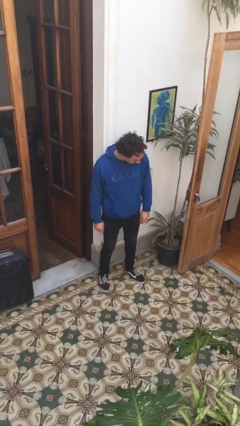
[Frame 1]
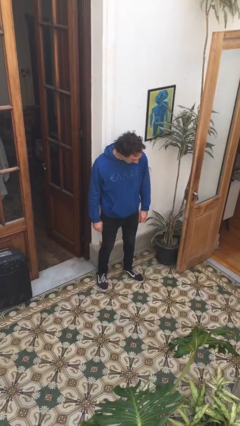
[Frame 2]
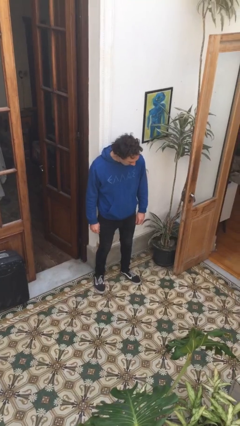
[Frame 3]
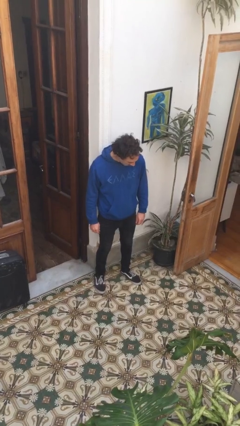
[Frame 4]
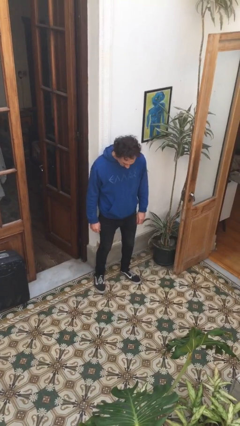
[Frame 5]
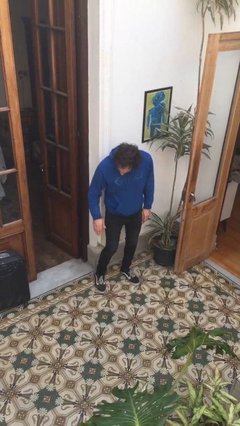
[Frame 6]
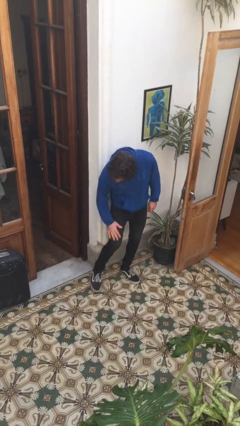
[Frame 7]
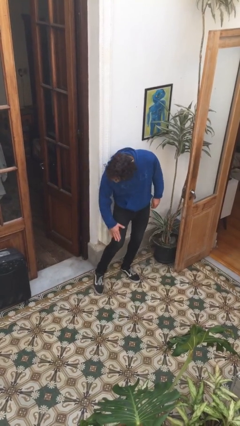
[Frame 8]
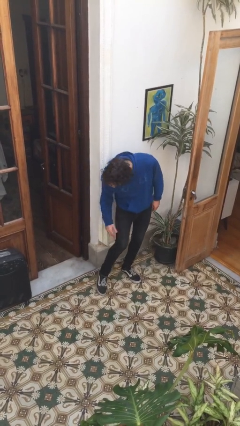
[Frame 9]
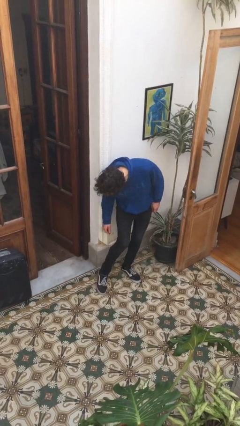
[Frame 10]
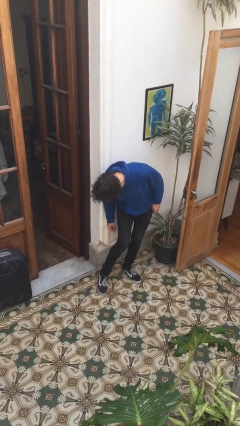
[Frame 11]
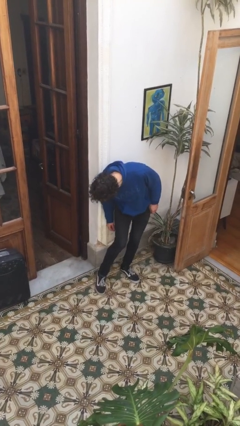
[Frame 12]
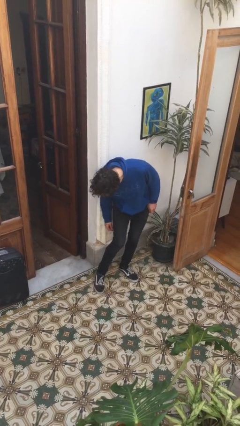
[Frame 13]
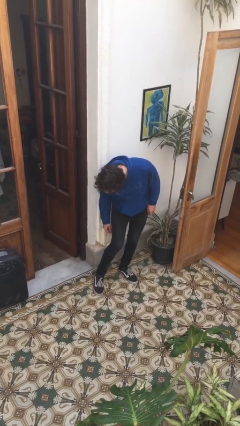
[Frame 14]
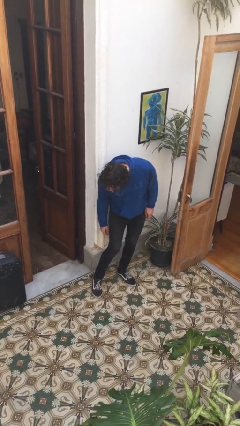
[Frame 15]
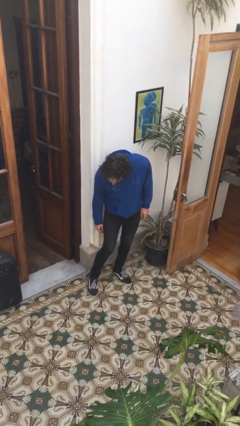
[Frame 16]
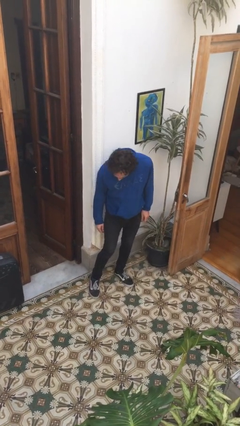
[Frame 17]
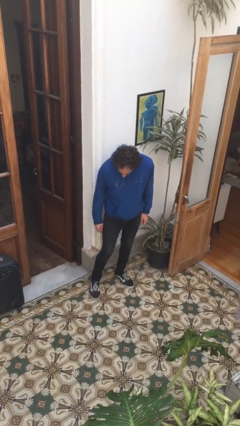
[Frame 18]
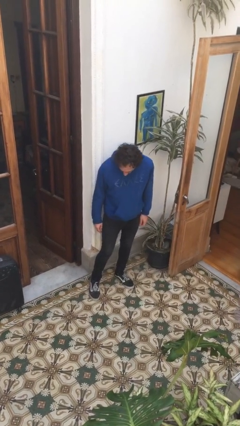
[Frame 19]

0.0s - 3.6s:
person swats bug

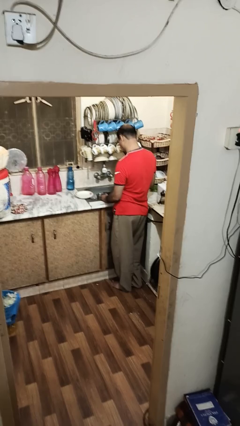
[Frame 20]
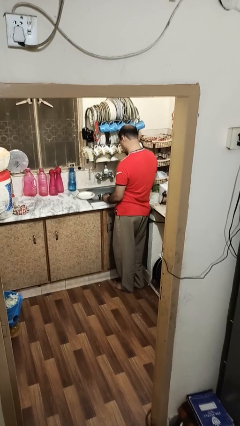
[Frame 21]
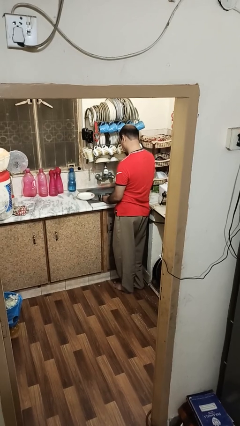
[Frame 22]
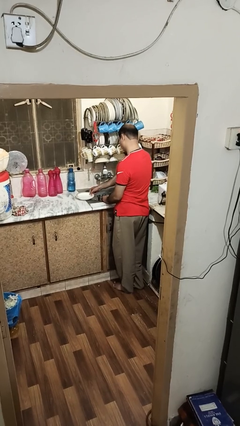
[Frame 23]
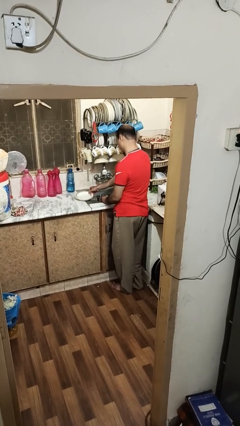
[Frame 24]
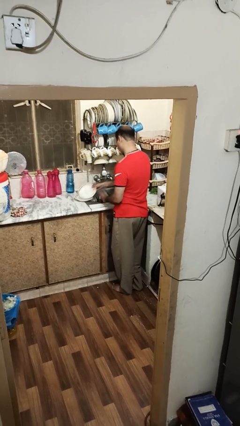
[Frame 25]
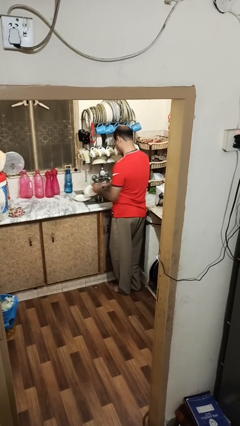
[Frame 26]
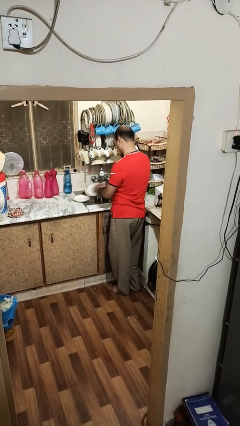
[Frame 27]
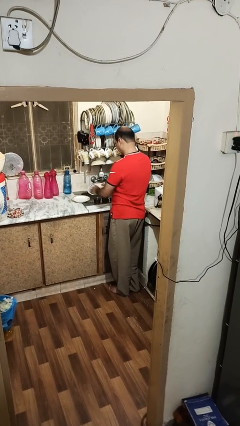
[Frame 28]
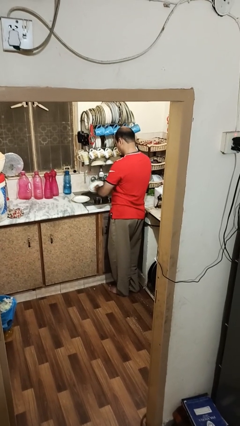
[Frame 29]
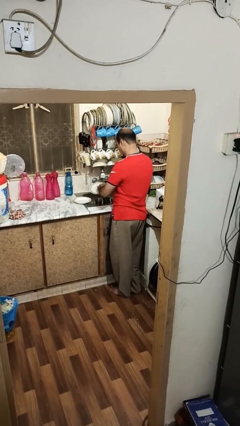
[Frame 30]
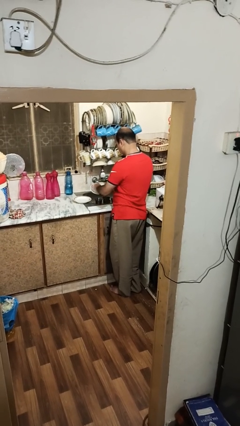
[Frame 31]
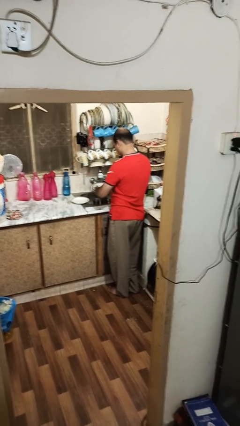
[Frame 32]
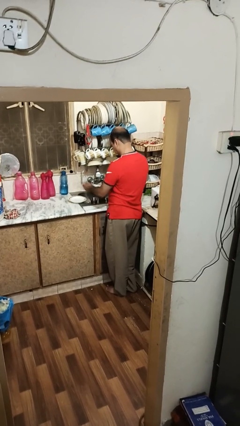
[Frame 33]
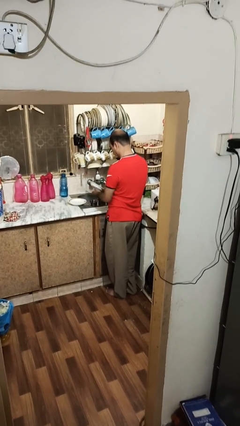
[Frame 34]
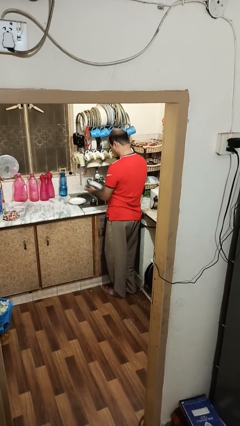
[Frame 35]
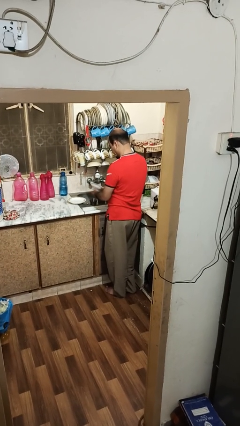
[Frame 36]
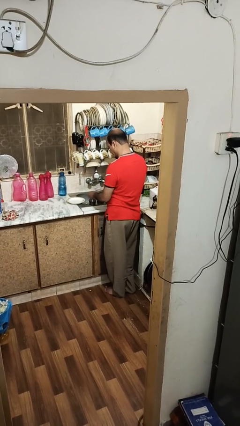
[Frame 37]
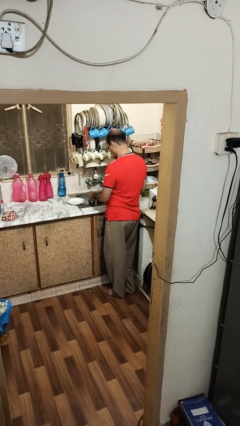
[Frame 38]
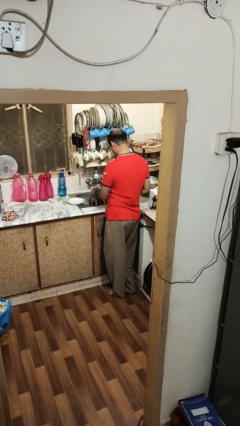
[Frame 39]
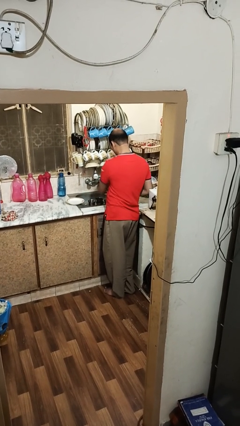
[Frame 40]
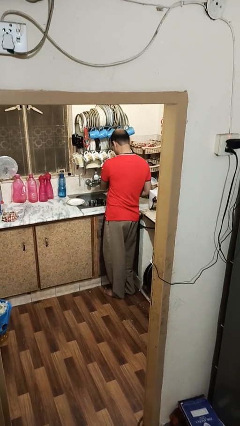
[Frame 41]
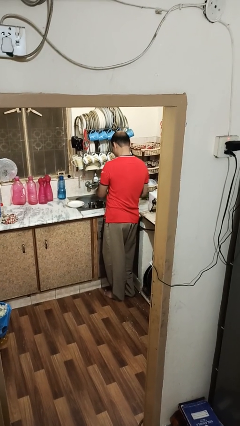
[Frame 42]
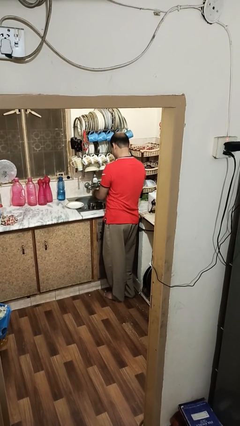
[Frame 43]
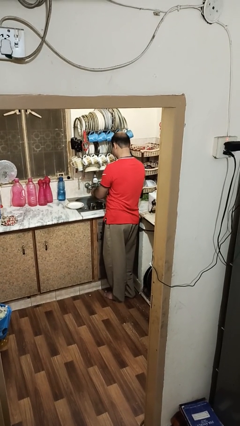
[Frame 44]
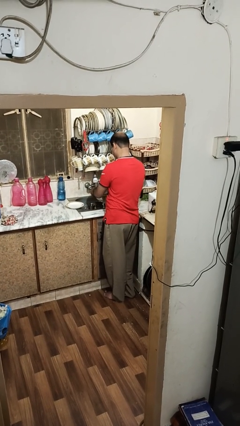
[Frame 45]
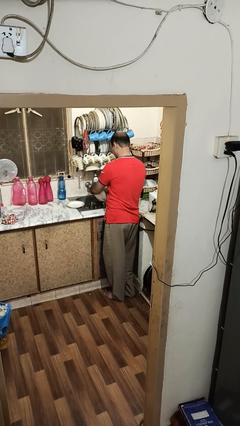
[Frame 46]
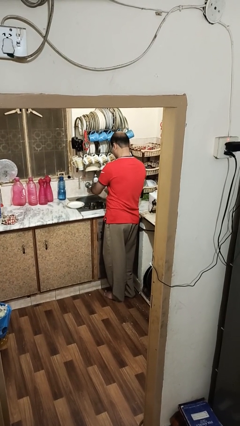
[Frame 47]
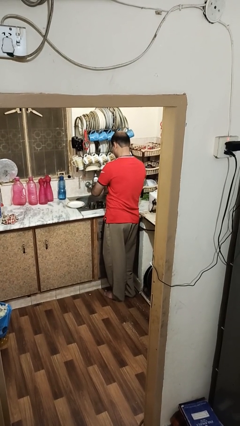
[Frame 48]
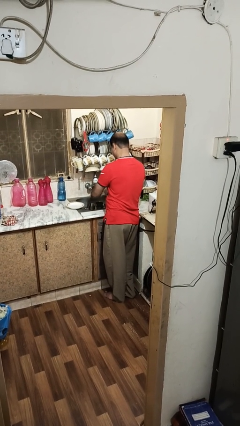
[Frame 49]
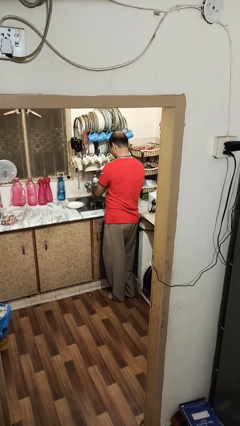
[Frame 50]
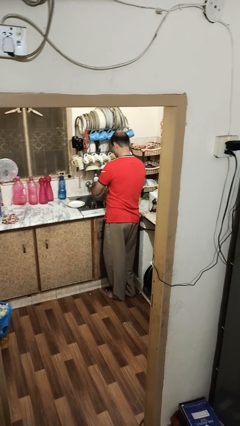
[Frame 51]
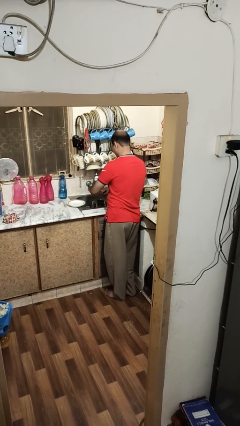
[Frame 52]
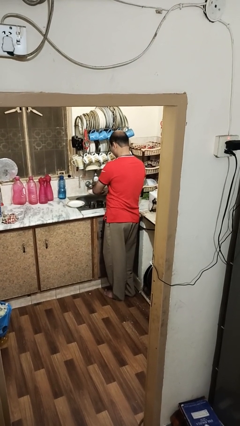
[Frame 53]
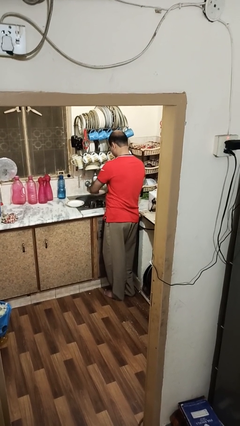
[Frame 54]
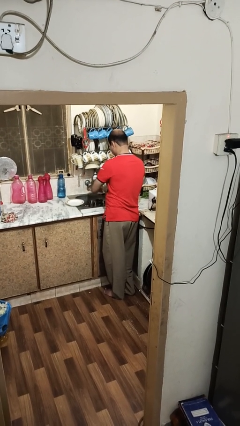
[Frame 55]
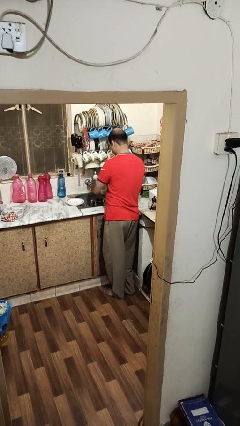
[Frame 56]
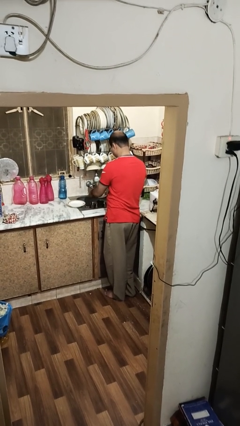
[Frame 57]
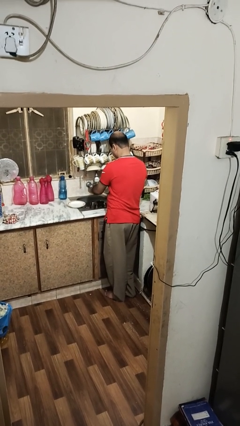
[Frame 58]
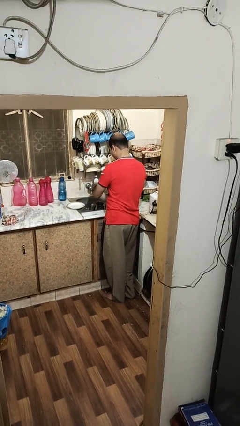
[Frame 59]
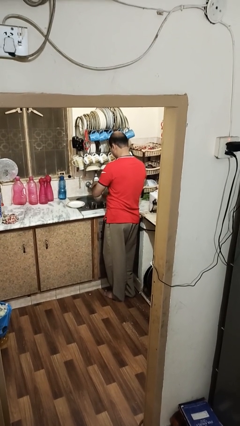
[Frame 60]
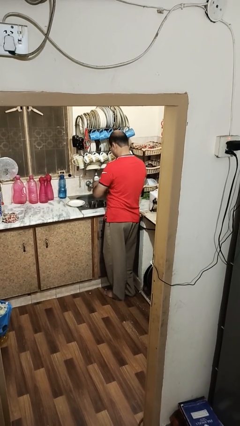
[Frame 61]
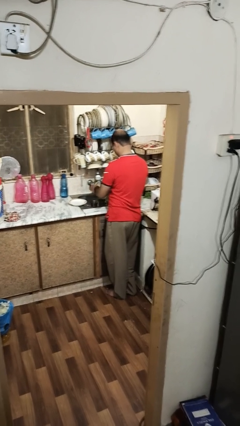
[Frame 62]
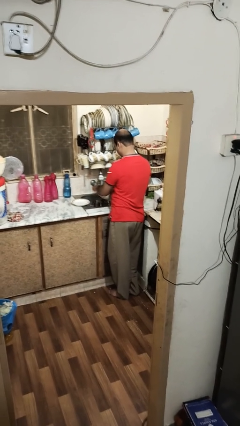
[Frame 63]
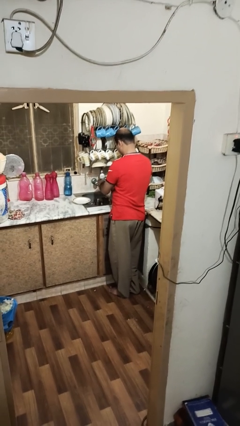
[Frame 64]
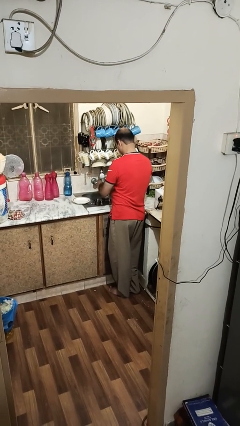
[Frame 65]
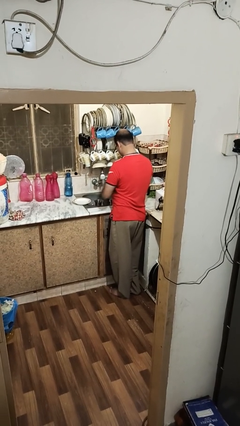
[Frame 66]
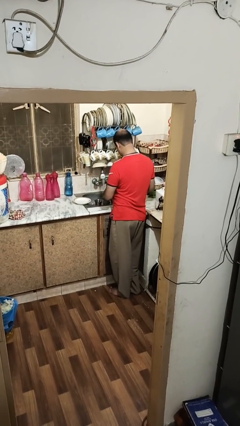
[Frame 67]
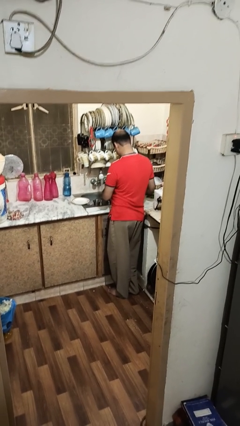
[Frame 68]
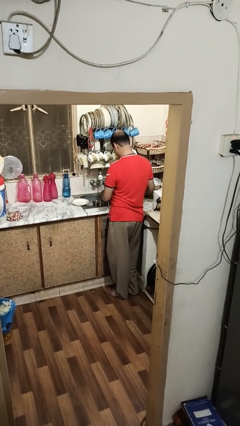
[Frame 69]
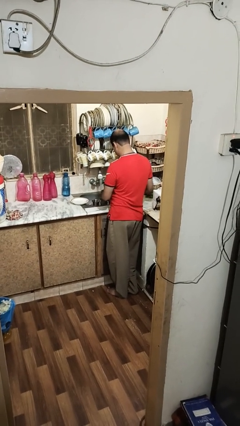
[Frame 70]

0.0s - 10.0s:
person washes dish

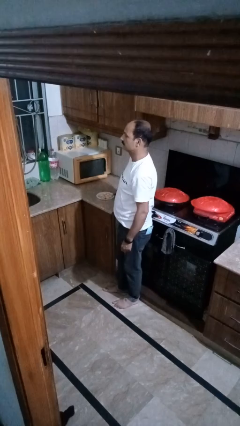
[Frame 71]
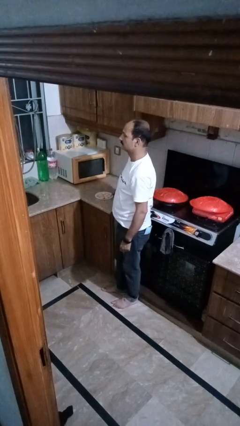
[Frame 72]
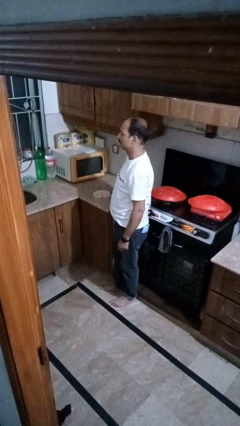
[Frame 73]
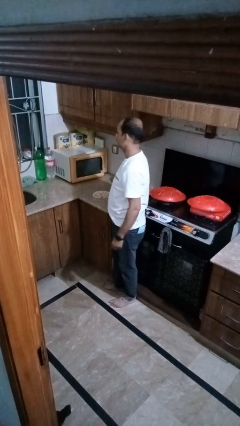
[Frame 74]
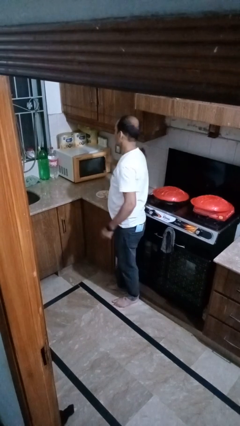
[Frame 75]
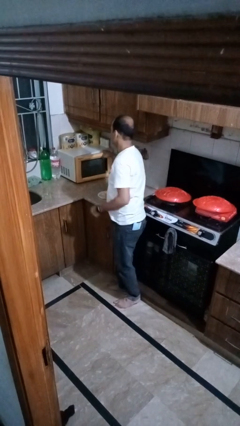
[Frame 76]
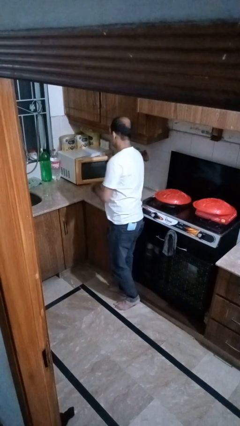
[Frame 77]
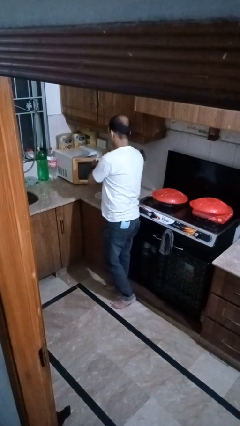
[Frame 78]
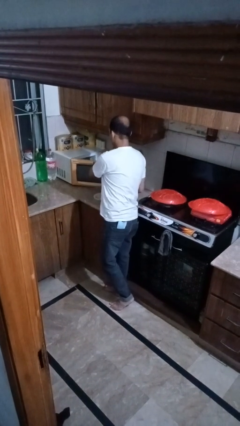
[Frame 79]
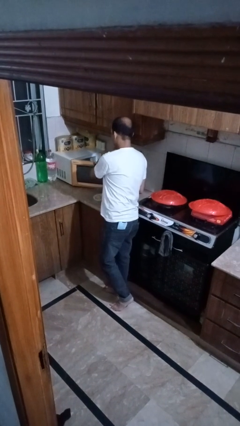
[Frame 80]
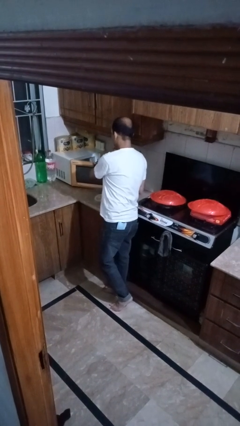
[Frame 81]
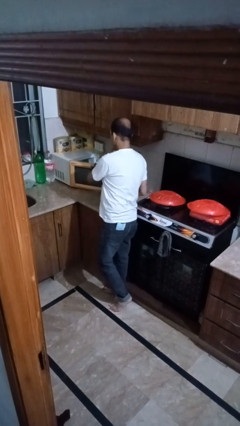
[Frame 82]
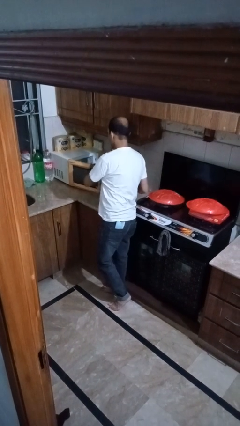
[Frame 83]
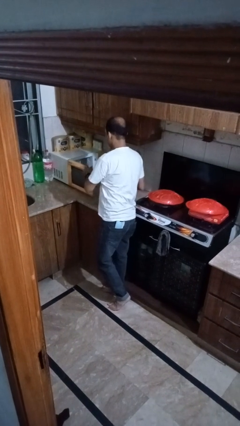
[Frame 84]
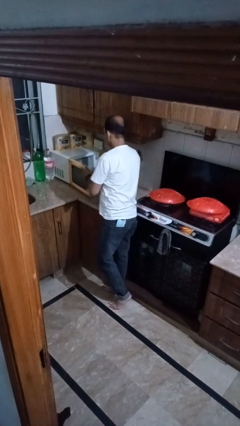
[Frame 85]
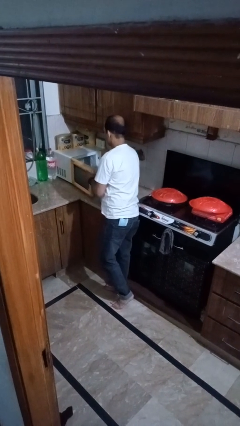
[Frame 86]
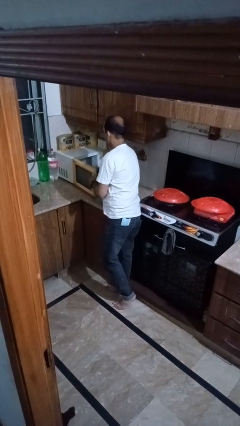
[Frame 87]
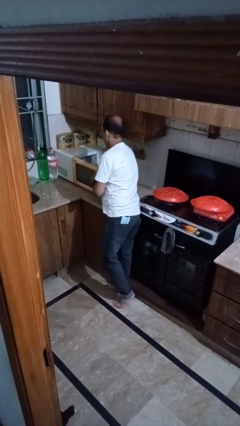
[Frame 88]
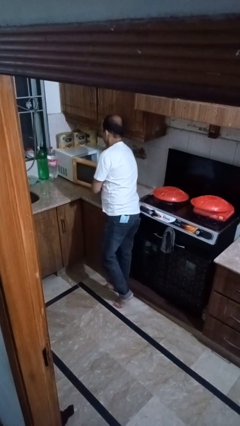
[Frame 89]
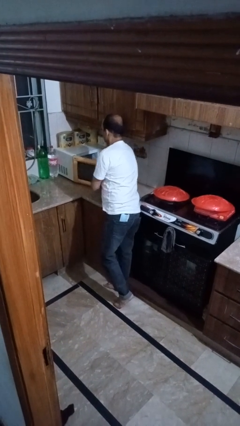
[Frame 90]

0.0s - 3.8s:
person puts object into microwave

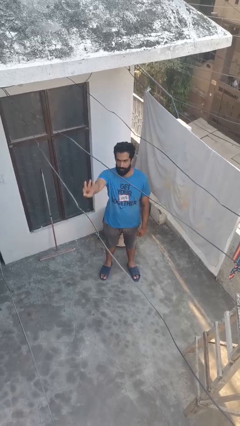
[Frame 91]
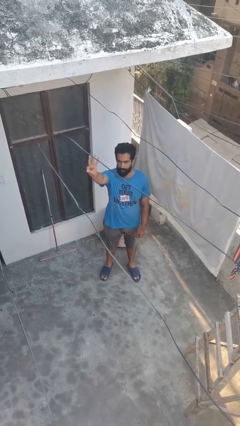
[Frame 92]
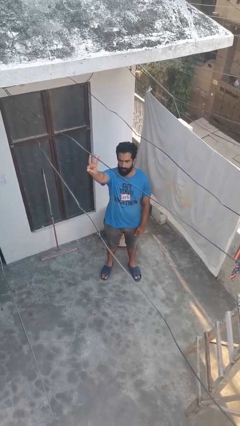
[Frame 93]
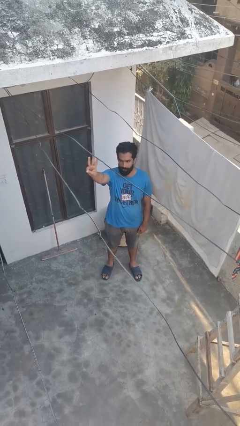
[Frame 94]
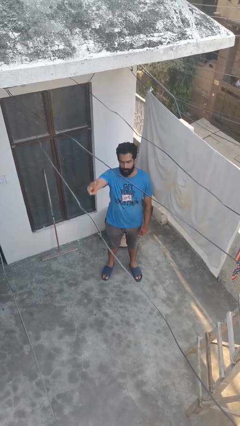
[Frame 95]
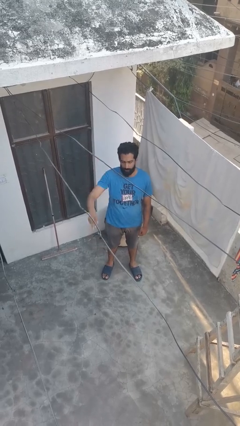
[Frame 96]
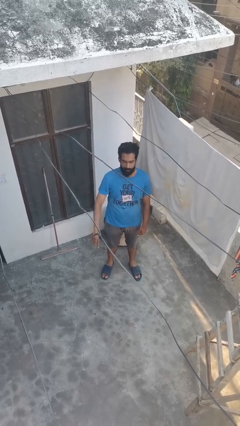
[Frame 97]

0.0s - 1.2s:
person gestures number three
